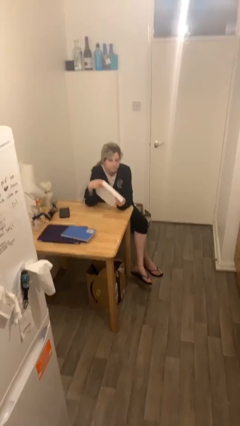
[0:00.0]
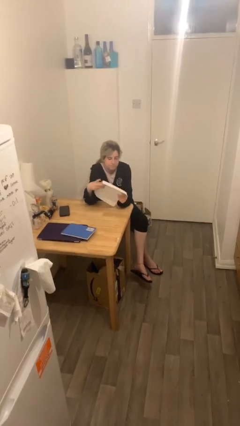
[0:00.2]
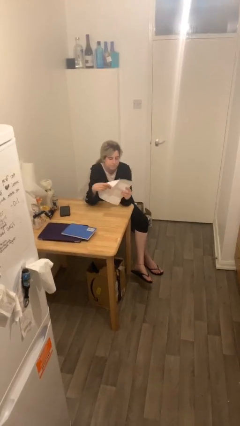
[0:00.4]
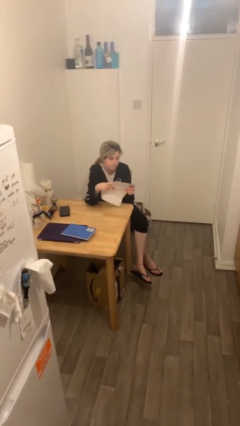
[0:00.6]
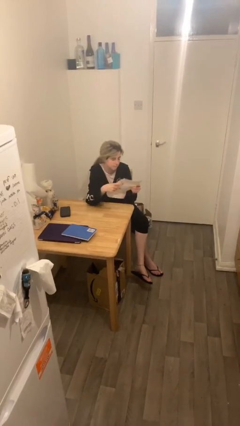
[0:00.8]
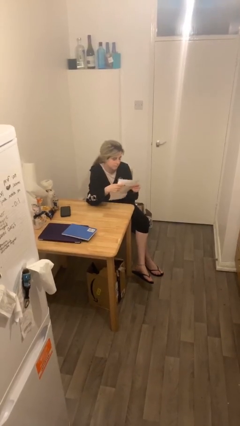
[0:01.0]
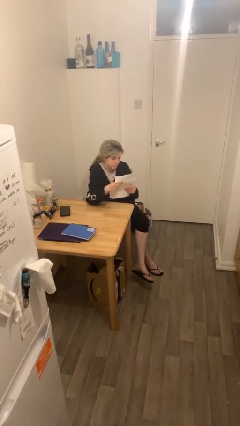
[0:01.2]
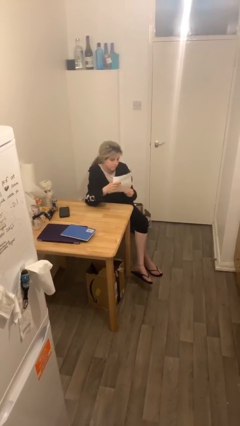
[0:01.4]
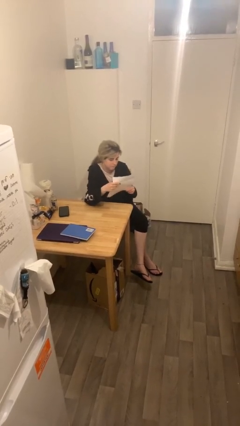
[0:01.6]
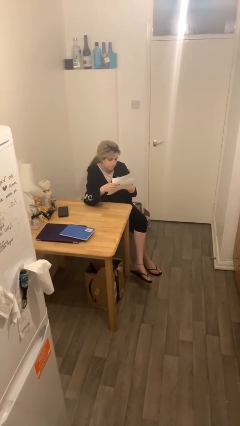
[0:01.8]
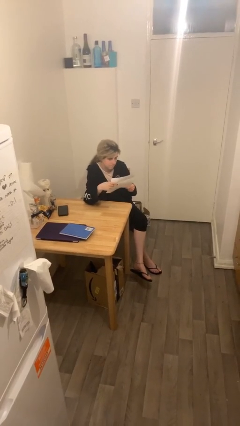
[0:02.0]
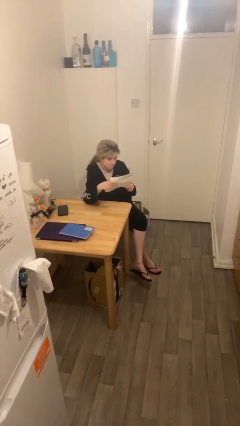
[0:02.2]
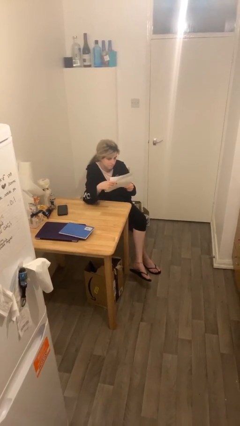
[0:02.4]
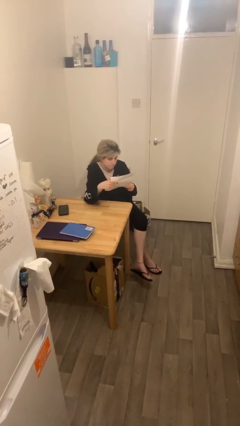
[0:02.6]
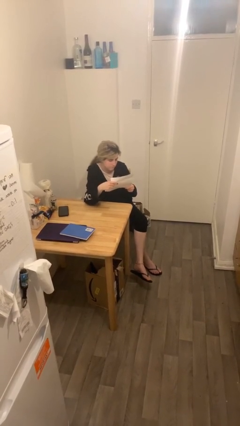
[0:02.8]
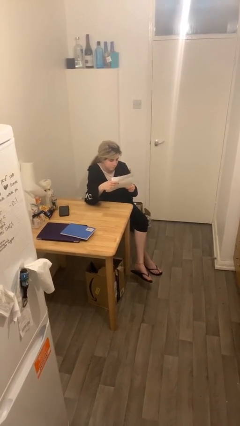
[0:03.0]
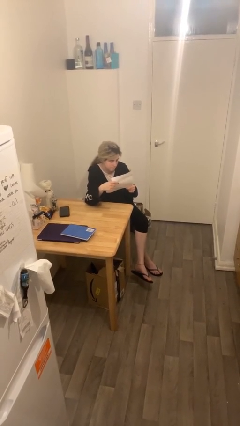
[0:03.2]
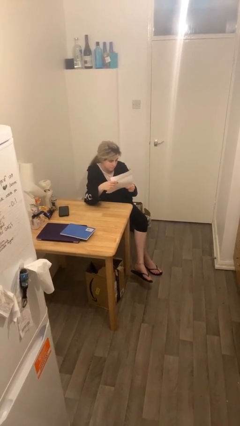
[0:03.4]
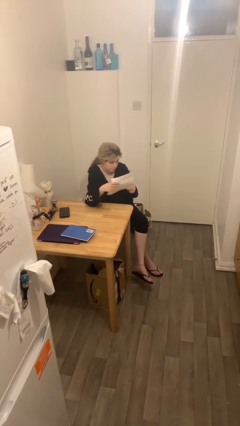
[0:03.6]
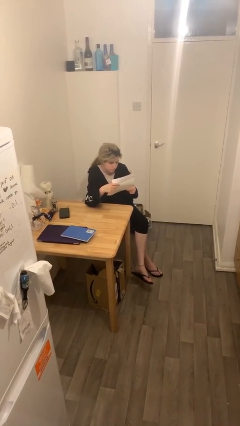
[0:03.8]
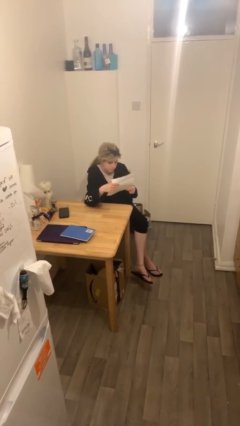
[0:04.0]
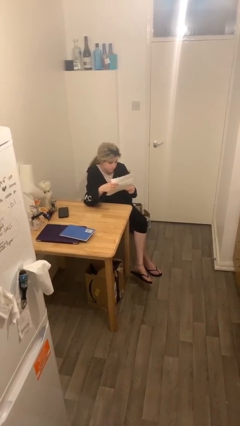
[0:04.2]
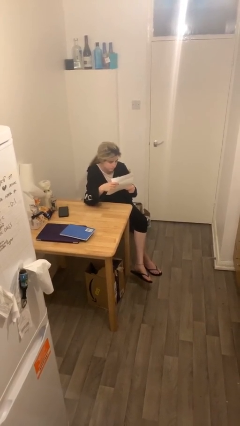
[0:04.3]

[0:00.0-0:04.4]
person reads document

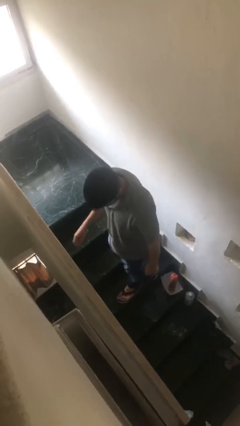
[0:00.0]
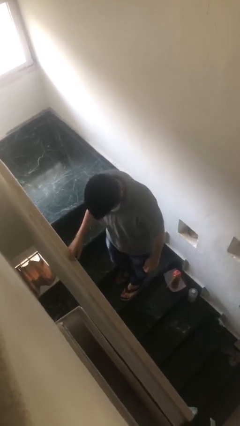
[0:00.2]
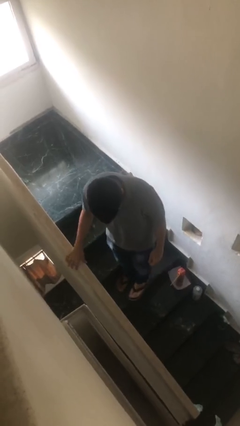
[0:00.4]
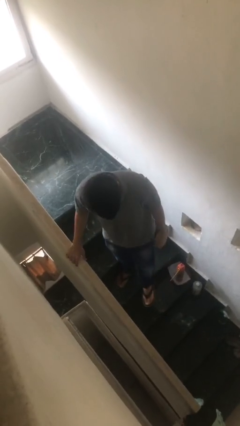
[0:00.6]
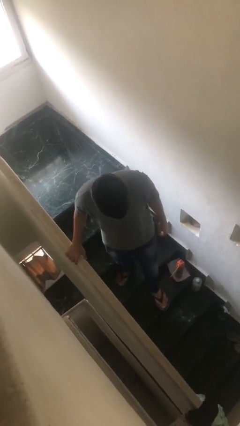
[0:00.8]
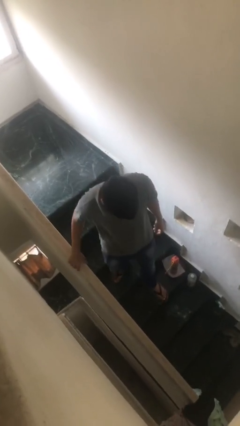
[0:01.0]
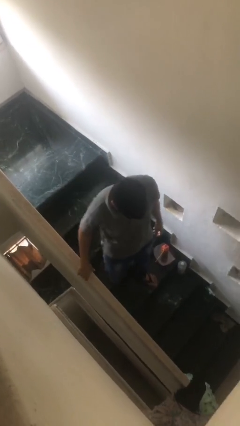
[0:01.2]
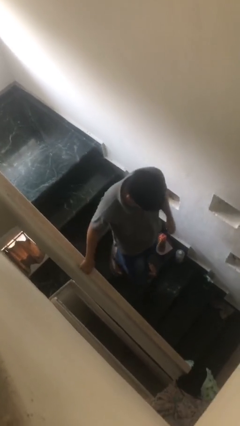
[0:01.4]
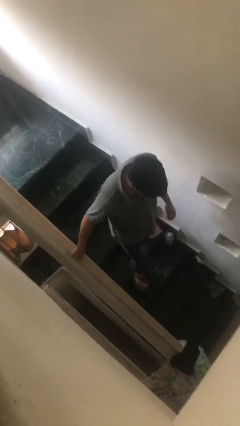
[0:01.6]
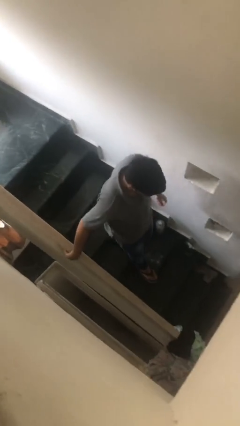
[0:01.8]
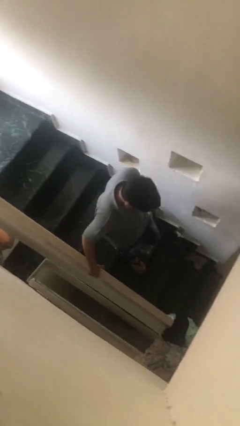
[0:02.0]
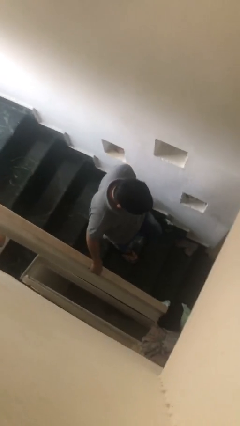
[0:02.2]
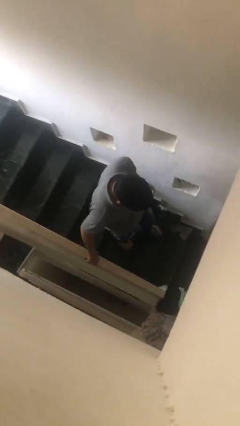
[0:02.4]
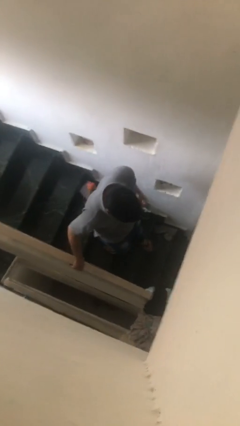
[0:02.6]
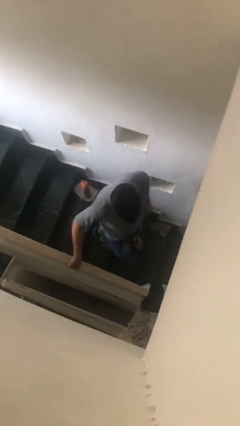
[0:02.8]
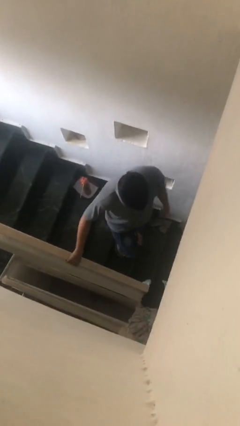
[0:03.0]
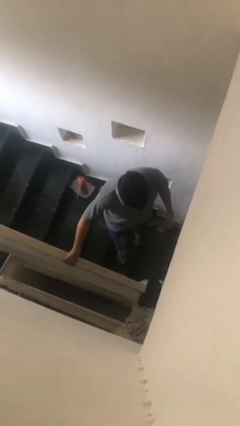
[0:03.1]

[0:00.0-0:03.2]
person climbs down stairs

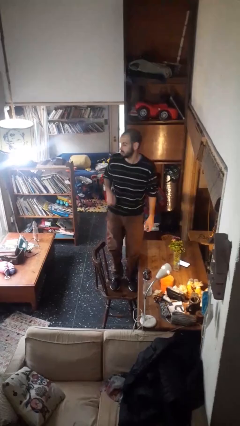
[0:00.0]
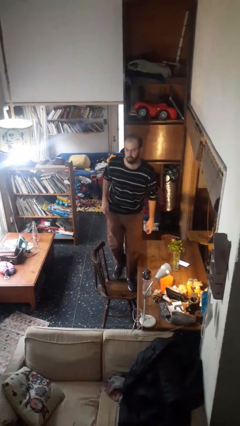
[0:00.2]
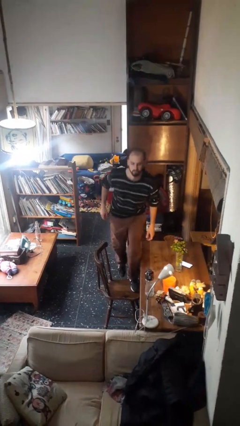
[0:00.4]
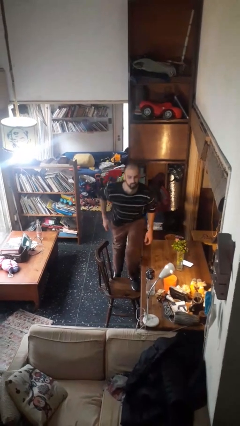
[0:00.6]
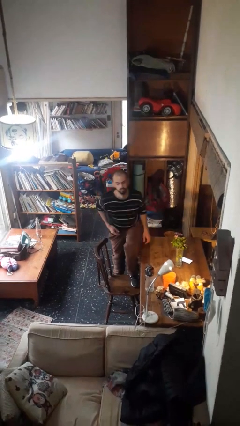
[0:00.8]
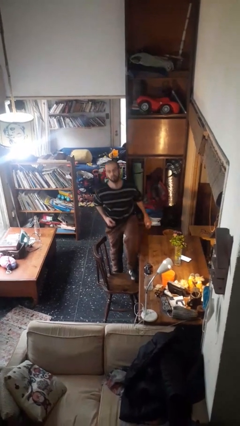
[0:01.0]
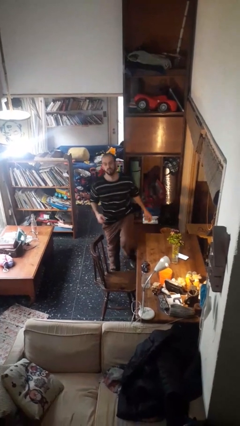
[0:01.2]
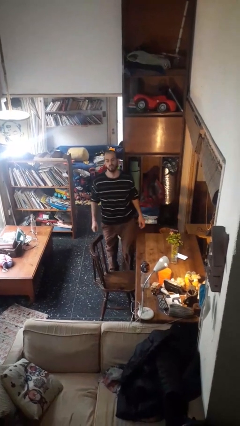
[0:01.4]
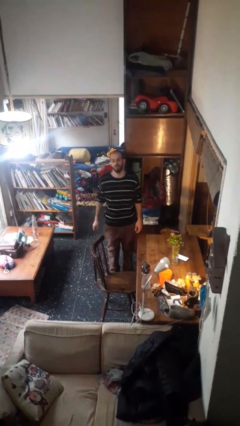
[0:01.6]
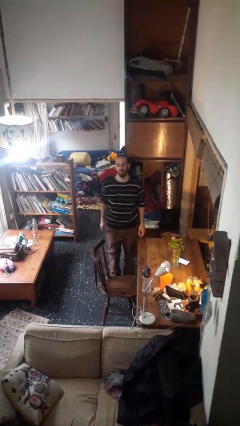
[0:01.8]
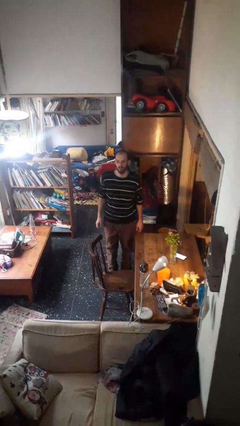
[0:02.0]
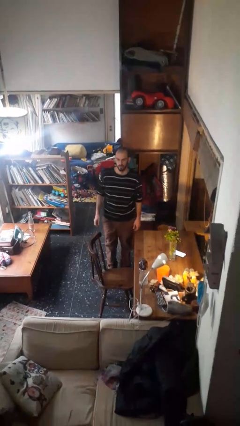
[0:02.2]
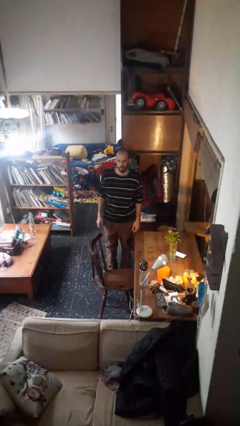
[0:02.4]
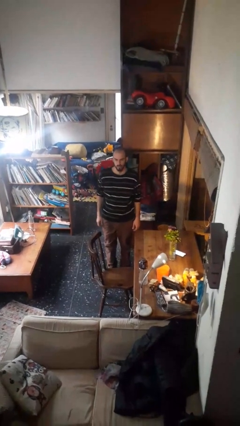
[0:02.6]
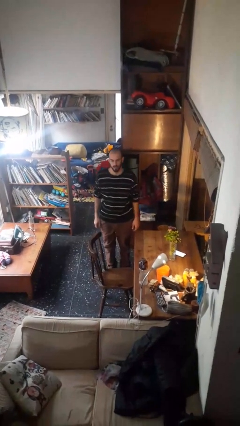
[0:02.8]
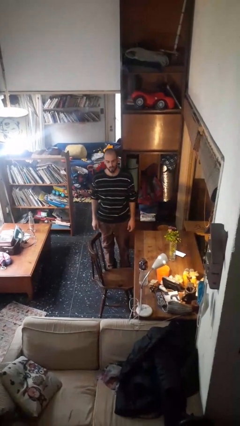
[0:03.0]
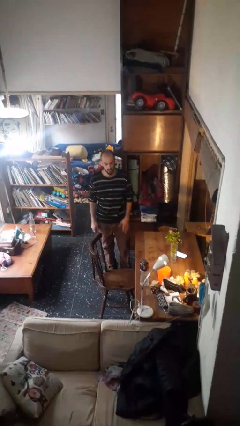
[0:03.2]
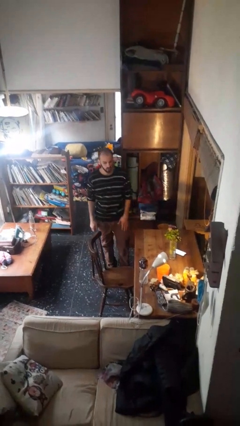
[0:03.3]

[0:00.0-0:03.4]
person climbs off chair

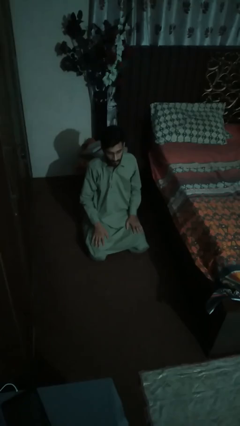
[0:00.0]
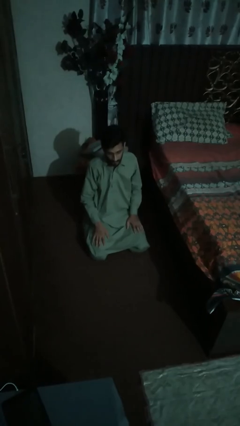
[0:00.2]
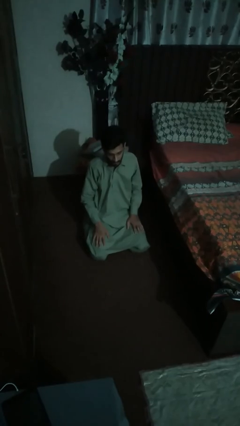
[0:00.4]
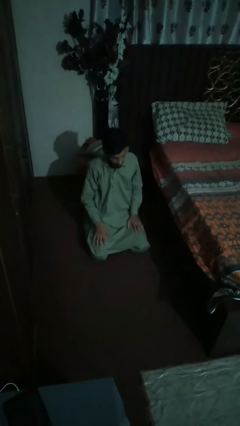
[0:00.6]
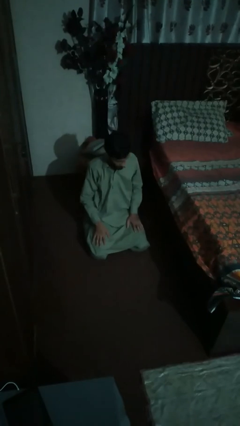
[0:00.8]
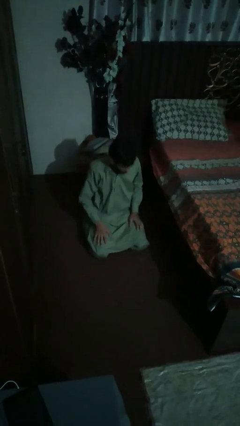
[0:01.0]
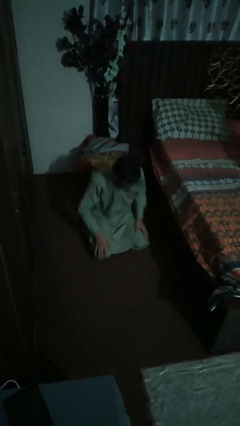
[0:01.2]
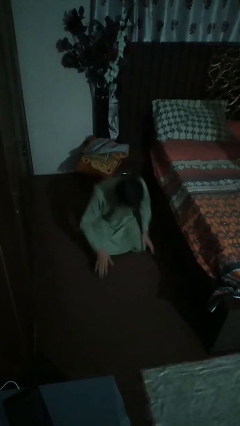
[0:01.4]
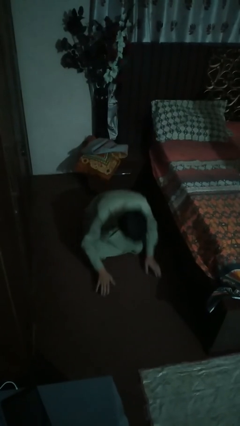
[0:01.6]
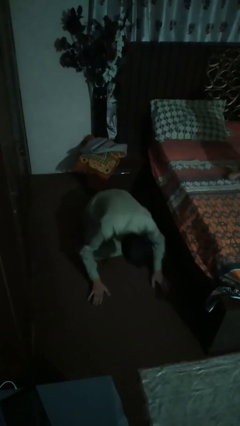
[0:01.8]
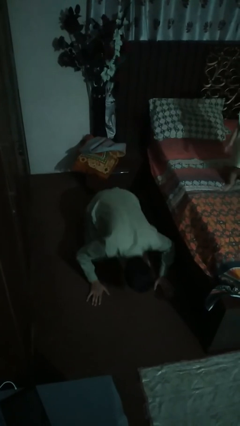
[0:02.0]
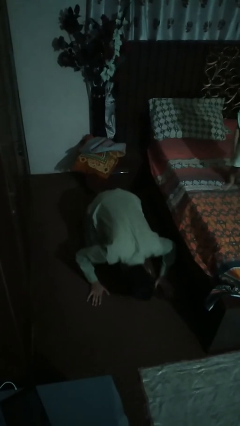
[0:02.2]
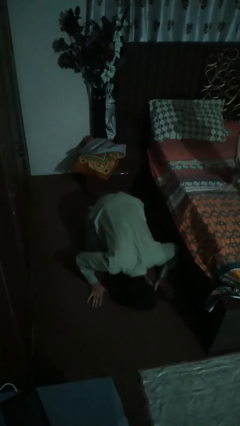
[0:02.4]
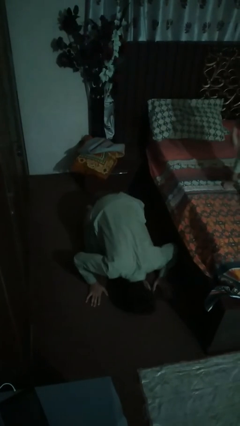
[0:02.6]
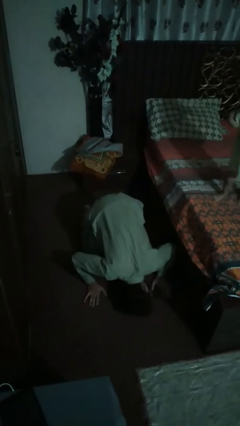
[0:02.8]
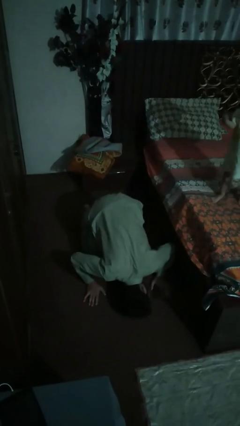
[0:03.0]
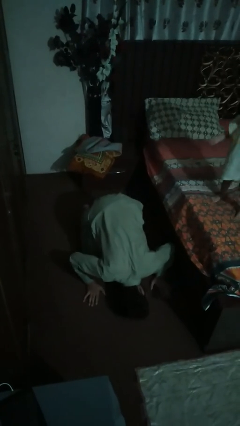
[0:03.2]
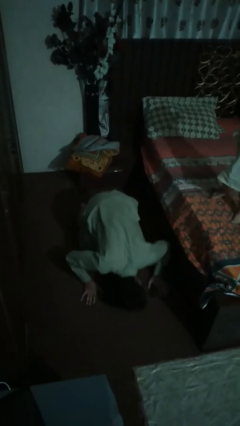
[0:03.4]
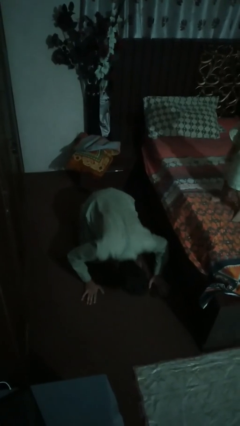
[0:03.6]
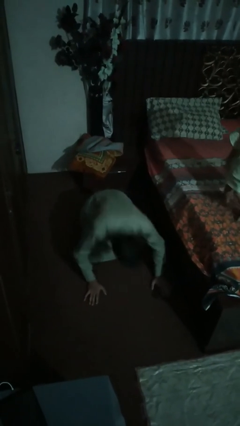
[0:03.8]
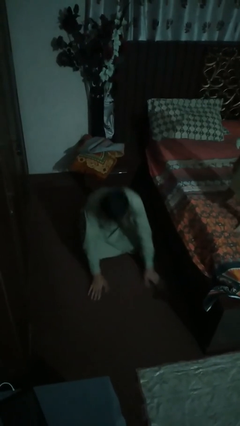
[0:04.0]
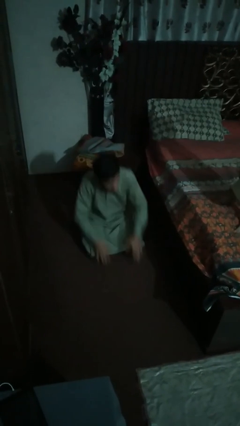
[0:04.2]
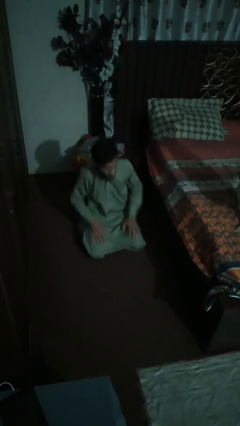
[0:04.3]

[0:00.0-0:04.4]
person searches under bed

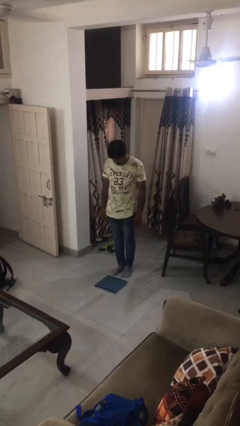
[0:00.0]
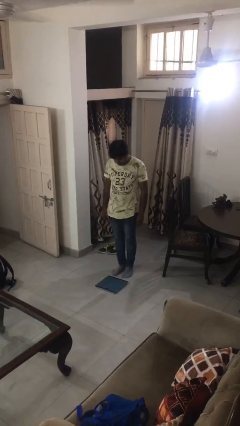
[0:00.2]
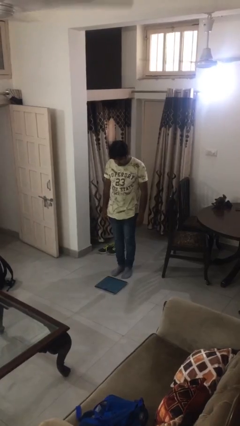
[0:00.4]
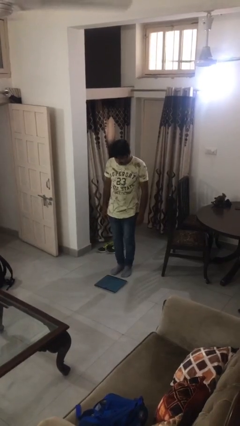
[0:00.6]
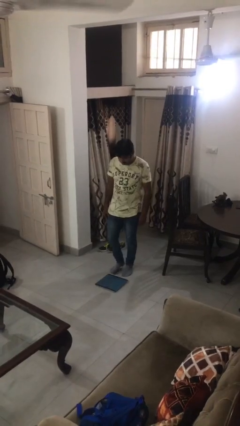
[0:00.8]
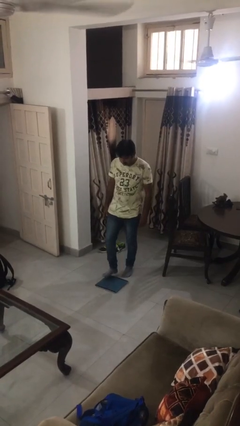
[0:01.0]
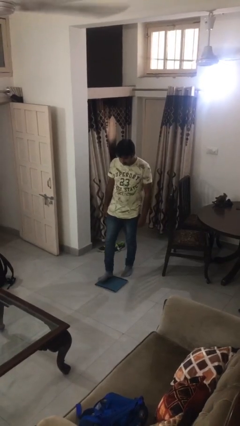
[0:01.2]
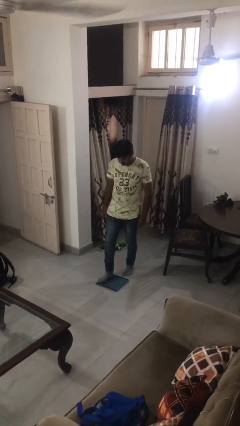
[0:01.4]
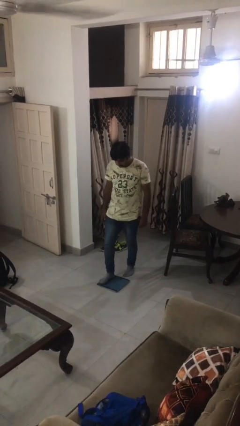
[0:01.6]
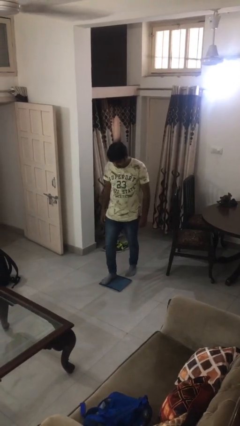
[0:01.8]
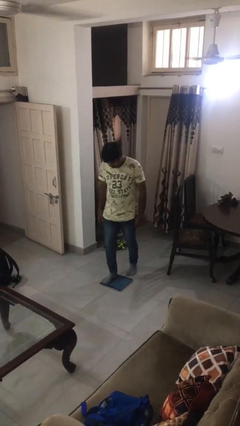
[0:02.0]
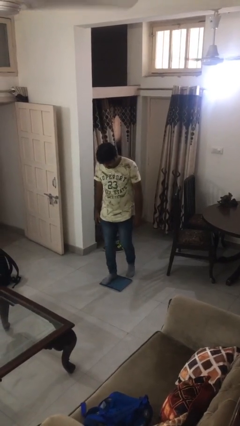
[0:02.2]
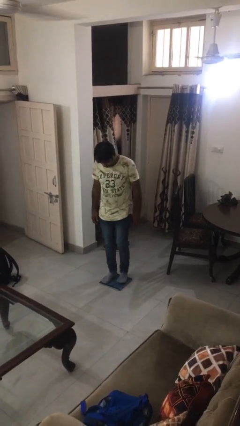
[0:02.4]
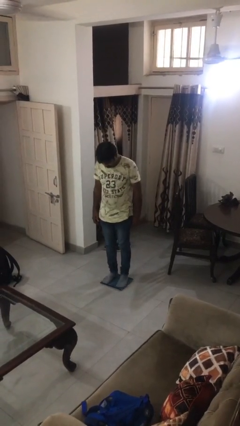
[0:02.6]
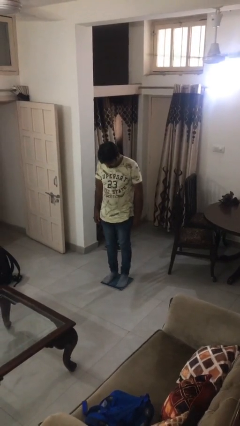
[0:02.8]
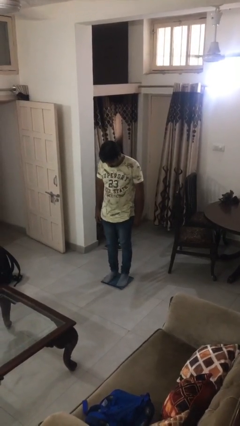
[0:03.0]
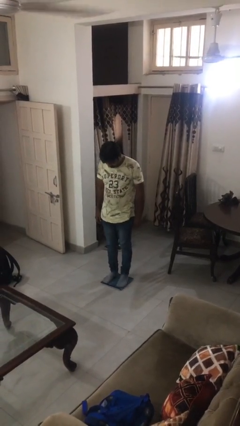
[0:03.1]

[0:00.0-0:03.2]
person uses bodyweight scale
